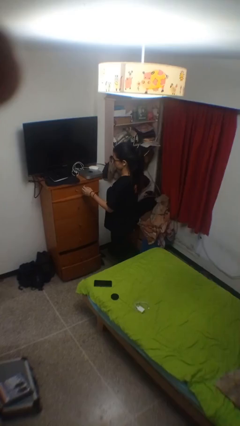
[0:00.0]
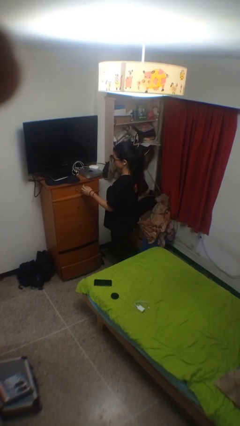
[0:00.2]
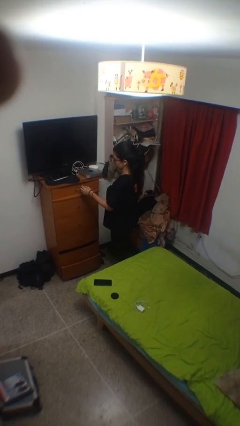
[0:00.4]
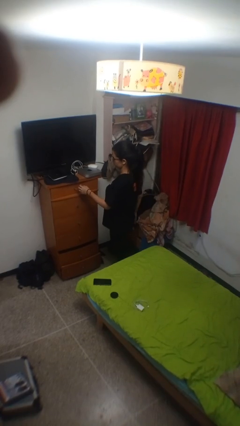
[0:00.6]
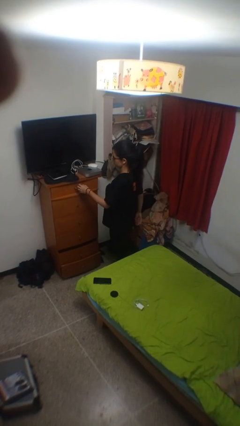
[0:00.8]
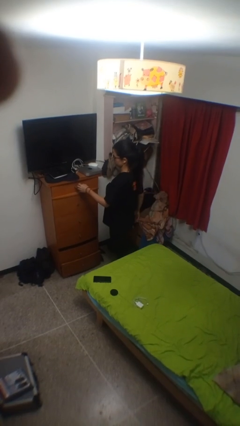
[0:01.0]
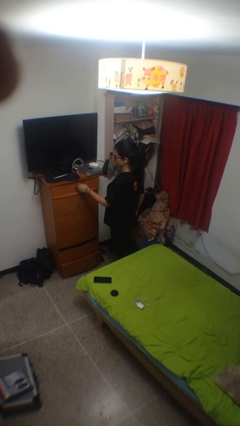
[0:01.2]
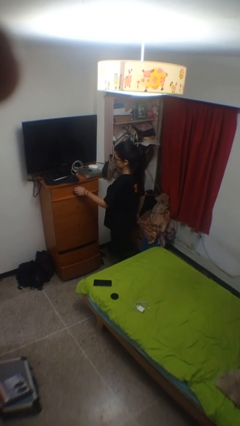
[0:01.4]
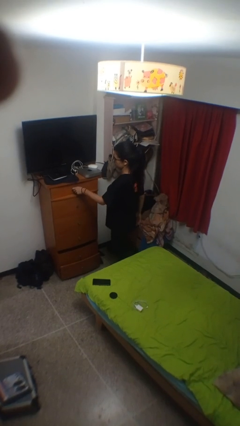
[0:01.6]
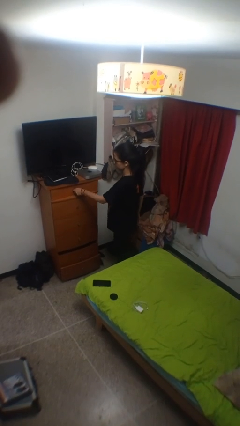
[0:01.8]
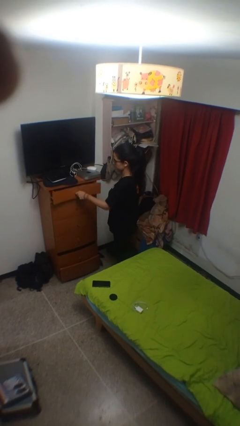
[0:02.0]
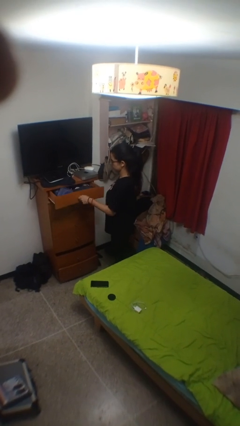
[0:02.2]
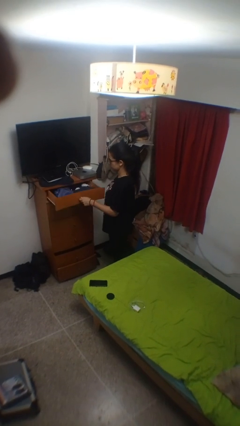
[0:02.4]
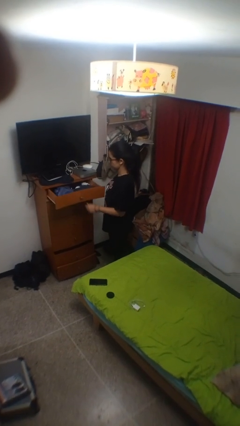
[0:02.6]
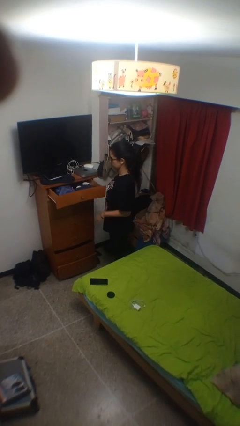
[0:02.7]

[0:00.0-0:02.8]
person opens dresser drawer

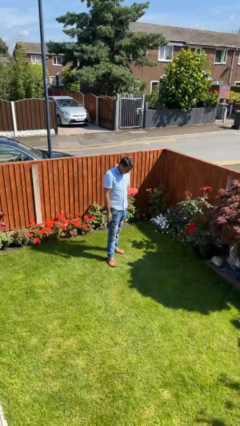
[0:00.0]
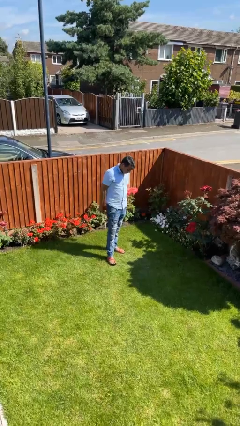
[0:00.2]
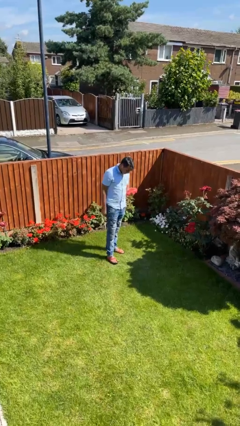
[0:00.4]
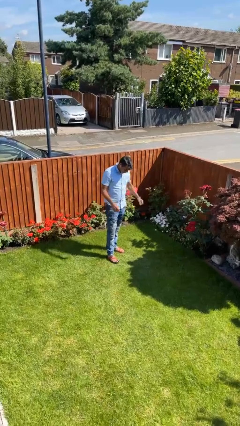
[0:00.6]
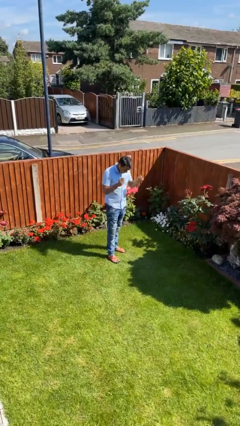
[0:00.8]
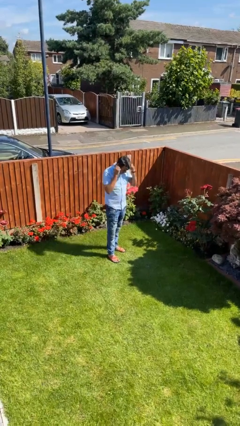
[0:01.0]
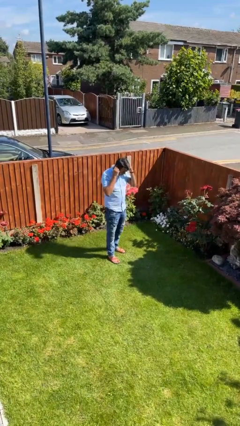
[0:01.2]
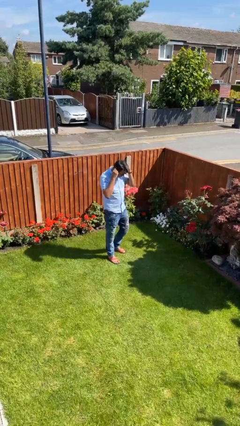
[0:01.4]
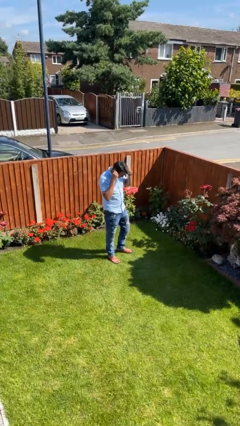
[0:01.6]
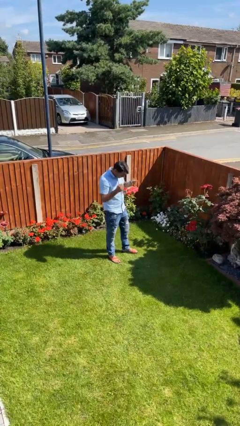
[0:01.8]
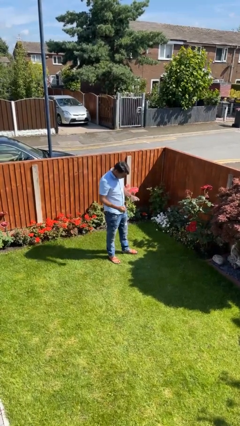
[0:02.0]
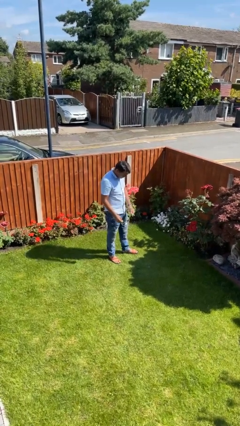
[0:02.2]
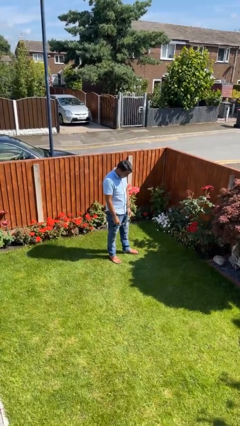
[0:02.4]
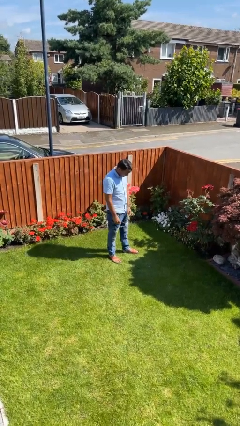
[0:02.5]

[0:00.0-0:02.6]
person takes off headphones

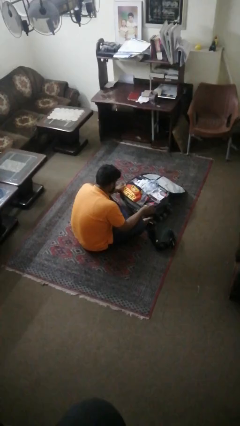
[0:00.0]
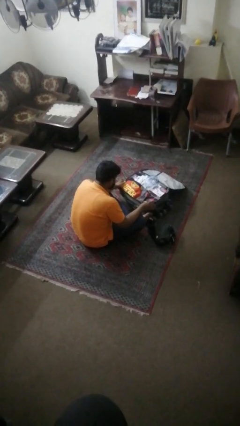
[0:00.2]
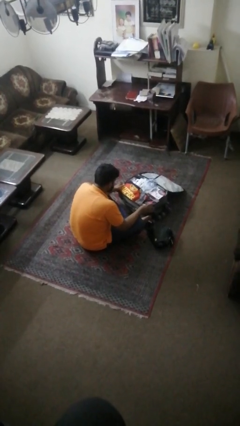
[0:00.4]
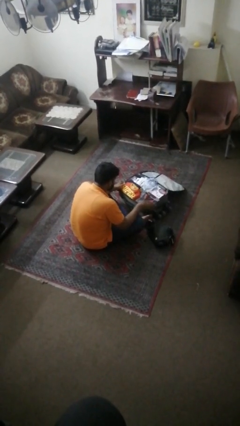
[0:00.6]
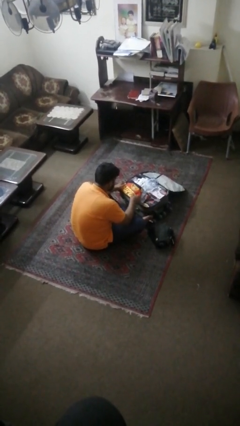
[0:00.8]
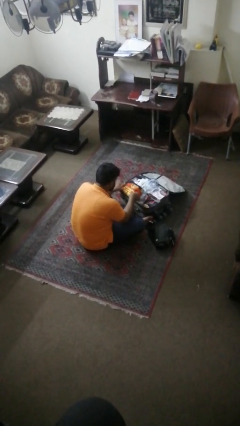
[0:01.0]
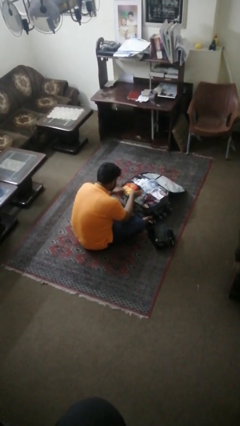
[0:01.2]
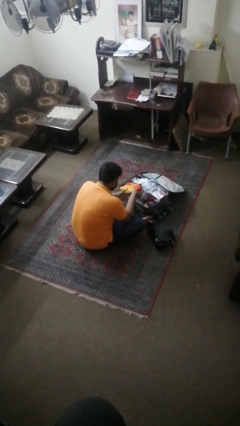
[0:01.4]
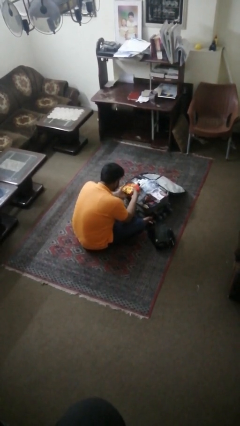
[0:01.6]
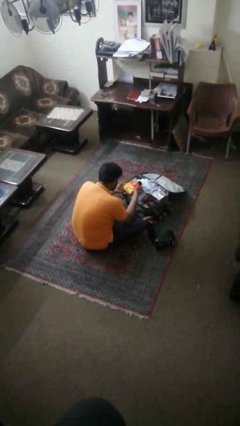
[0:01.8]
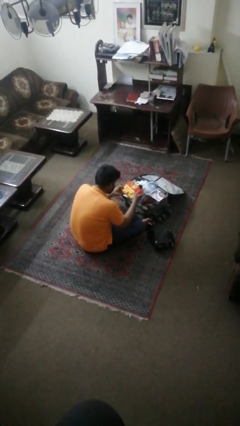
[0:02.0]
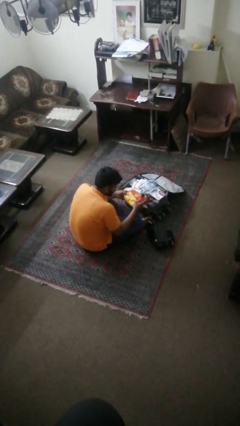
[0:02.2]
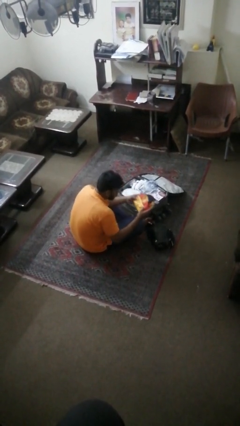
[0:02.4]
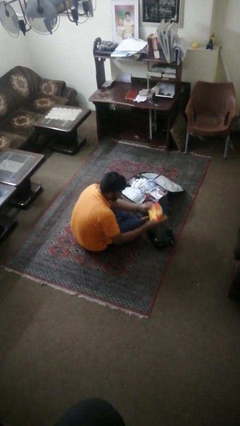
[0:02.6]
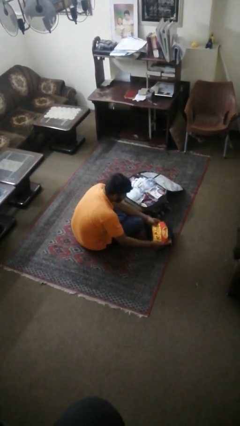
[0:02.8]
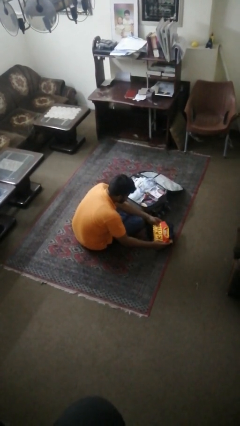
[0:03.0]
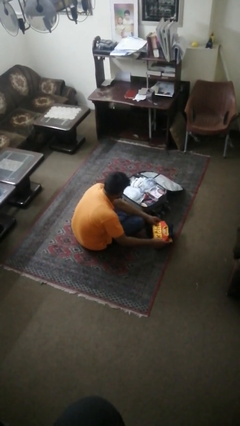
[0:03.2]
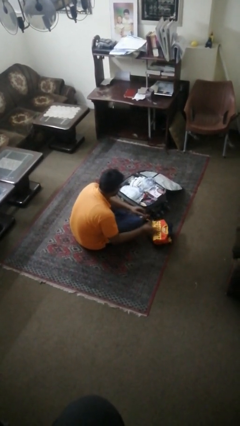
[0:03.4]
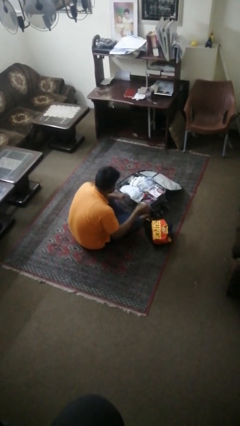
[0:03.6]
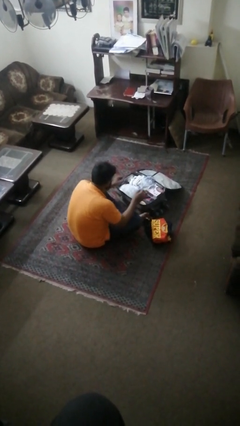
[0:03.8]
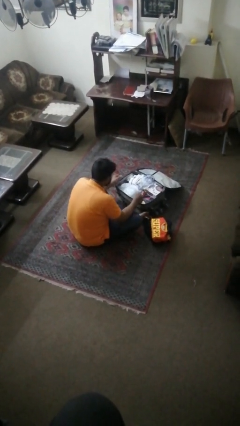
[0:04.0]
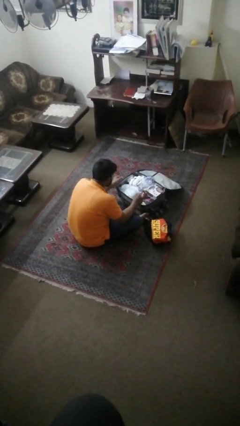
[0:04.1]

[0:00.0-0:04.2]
person unloads clothes from suitcase

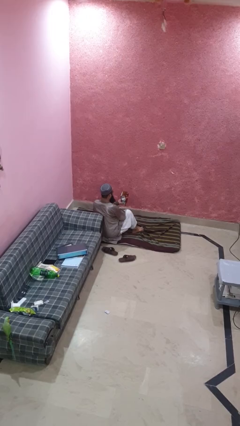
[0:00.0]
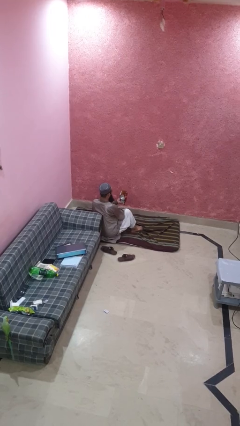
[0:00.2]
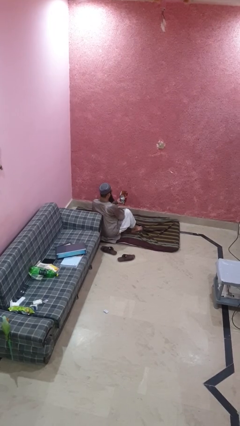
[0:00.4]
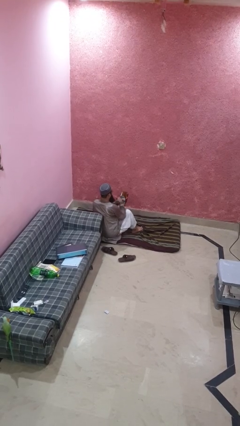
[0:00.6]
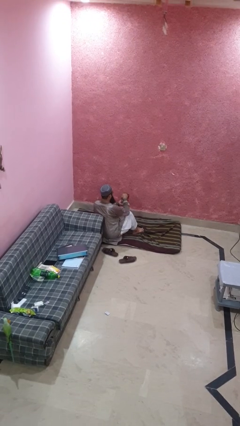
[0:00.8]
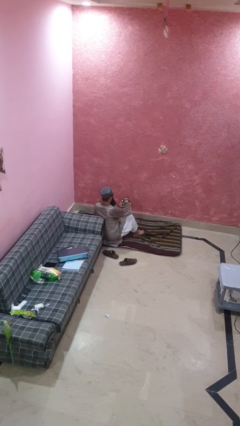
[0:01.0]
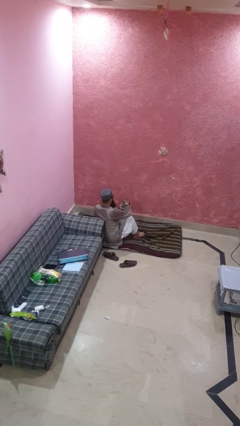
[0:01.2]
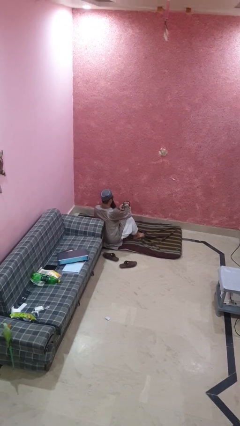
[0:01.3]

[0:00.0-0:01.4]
person eats snack from bag

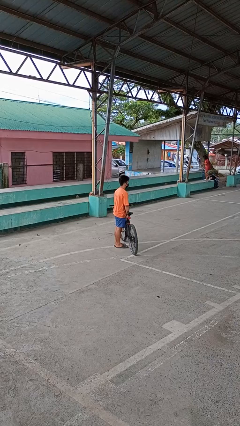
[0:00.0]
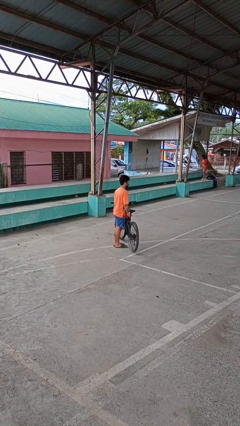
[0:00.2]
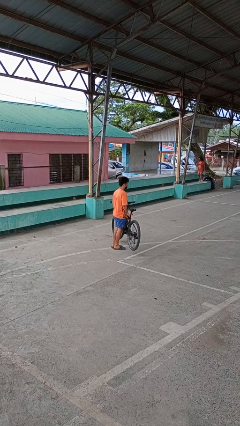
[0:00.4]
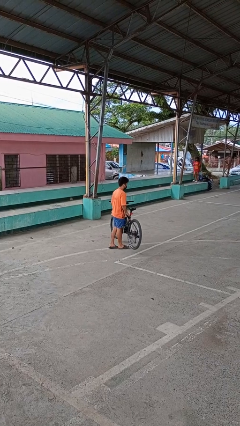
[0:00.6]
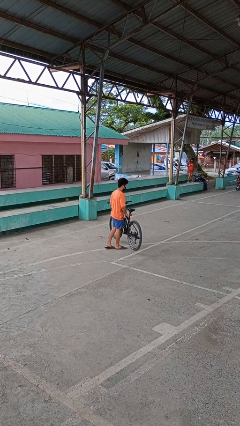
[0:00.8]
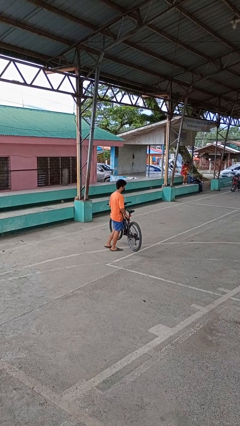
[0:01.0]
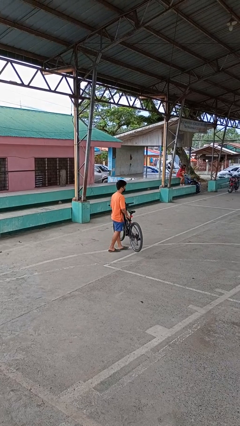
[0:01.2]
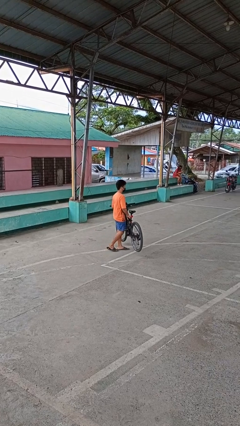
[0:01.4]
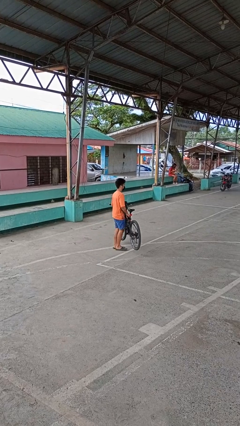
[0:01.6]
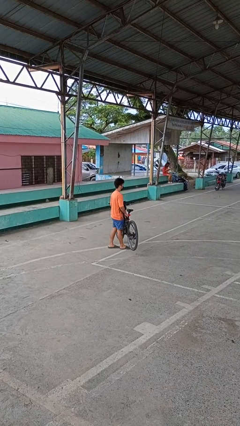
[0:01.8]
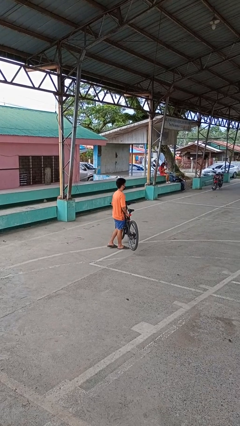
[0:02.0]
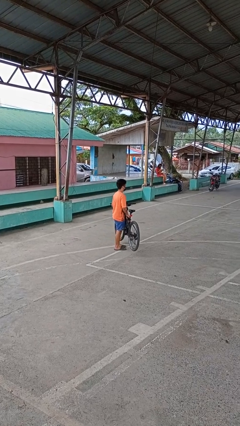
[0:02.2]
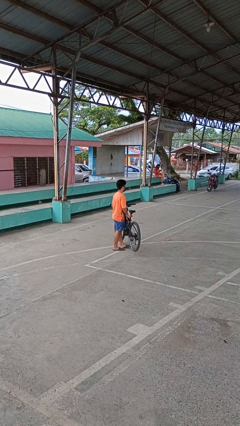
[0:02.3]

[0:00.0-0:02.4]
person carries bicycle

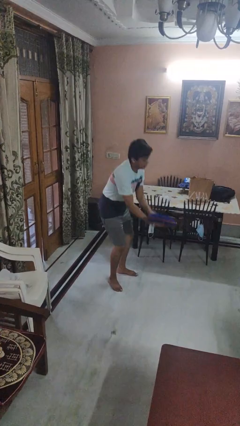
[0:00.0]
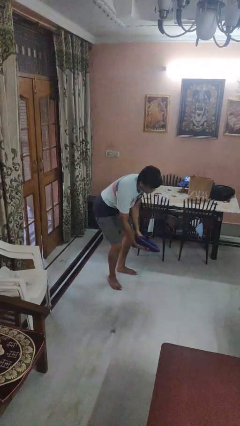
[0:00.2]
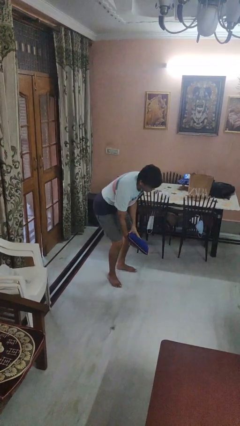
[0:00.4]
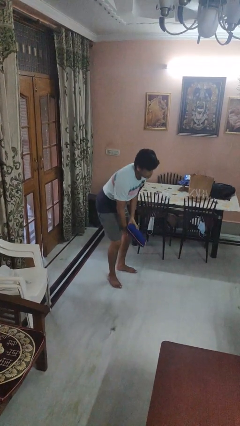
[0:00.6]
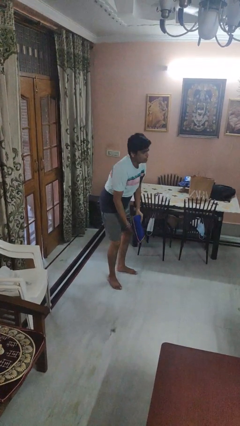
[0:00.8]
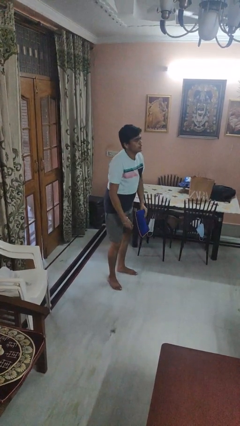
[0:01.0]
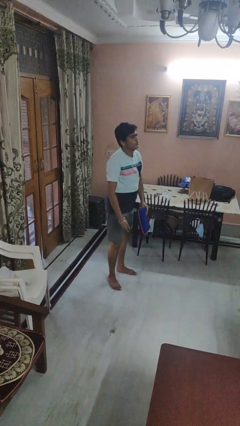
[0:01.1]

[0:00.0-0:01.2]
person catches dropped object

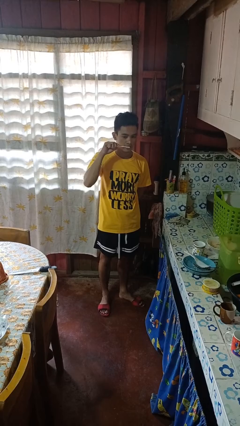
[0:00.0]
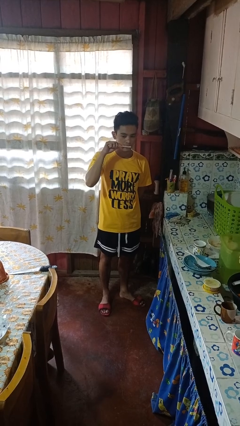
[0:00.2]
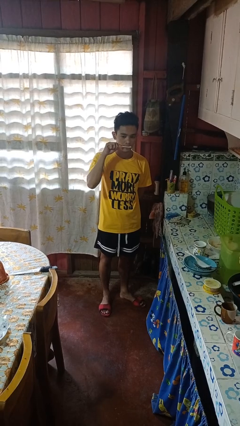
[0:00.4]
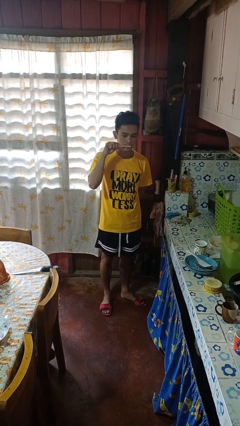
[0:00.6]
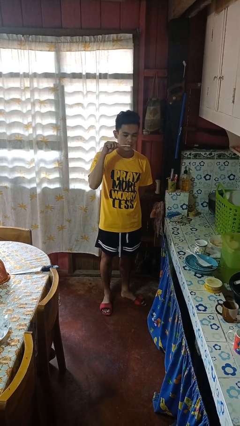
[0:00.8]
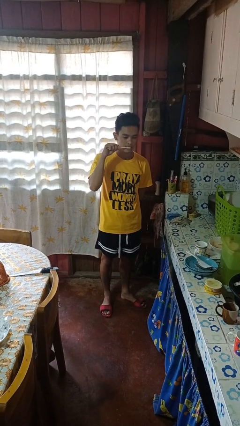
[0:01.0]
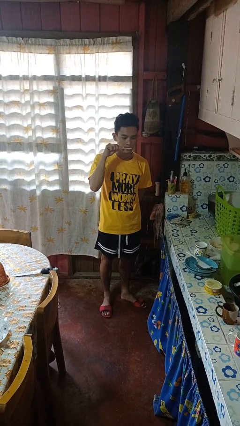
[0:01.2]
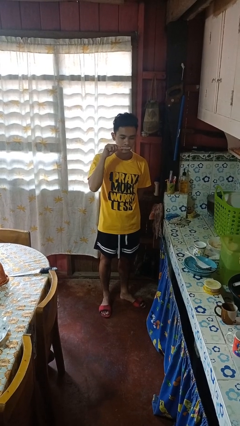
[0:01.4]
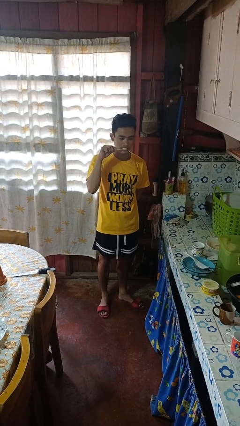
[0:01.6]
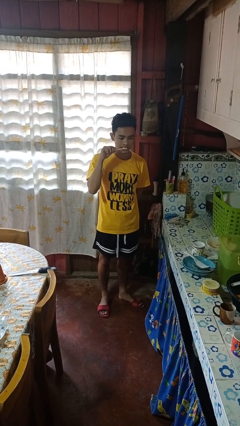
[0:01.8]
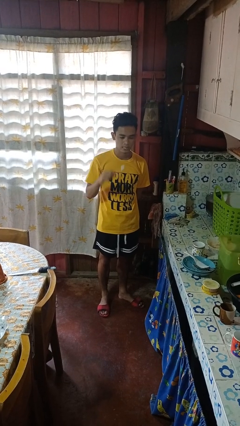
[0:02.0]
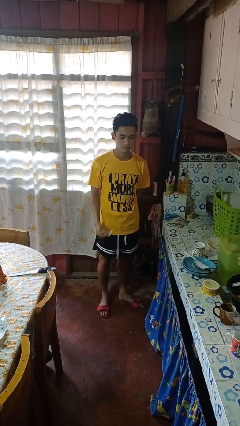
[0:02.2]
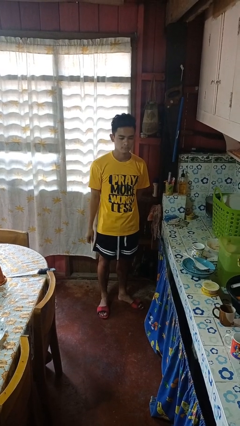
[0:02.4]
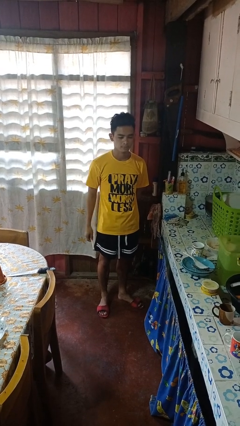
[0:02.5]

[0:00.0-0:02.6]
person brushes teeth
